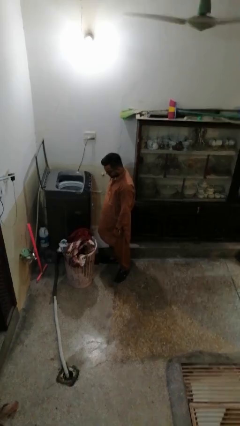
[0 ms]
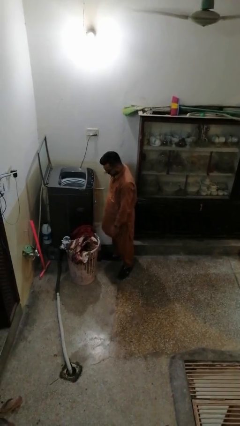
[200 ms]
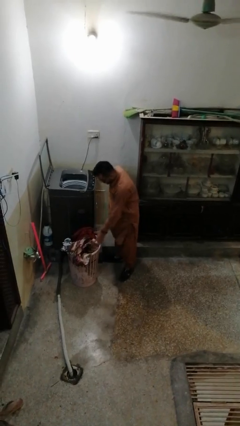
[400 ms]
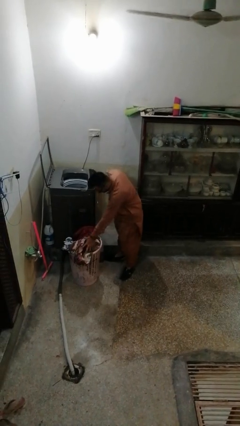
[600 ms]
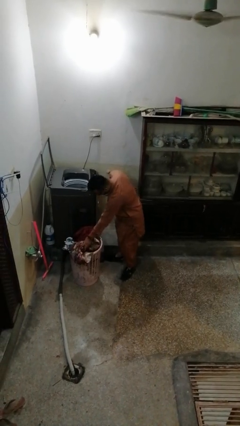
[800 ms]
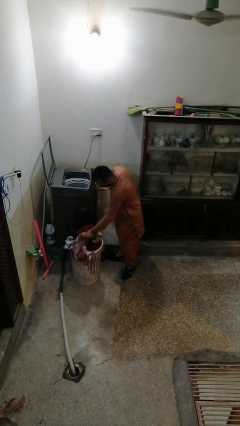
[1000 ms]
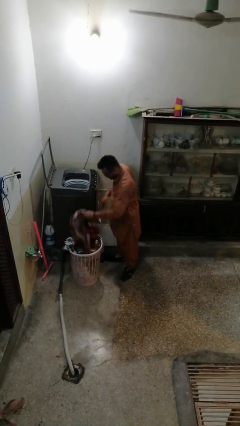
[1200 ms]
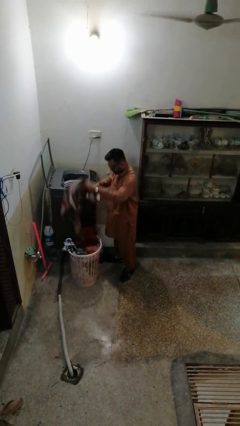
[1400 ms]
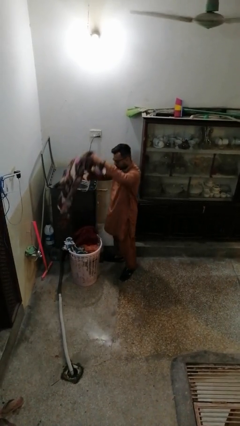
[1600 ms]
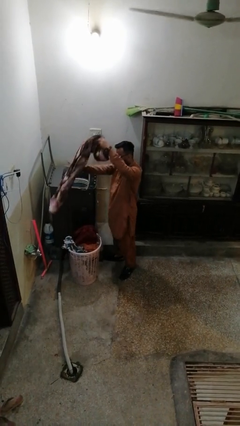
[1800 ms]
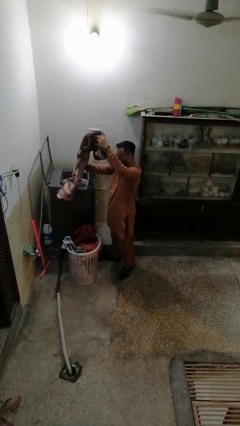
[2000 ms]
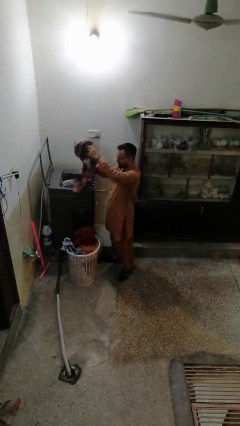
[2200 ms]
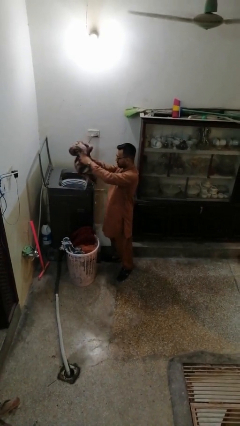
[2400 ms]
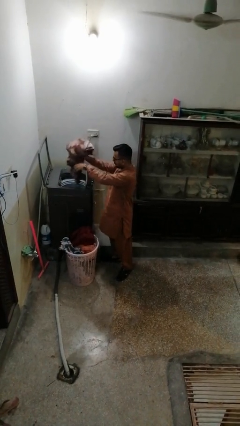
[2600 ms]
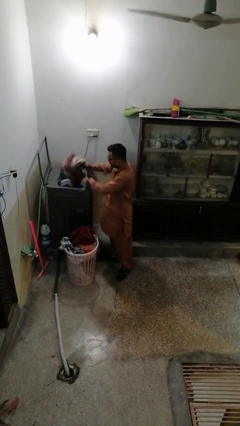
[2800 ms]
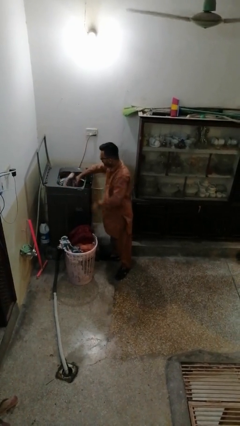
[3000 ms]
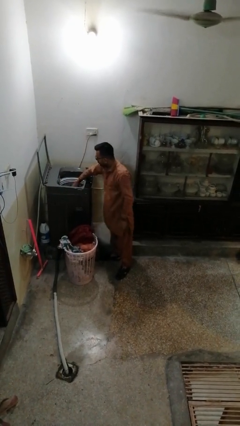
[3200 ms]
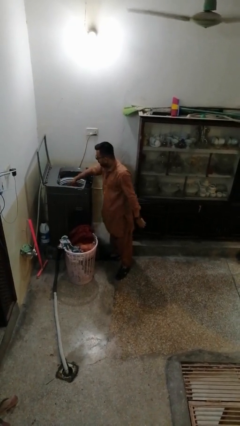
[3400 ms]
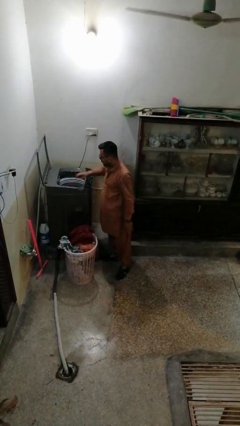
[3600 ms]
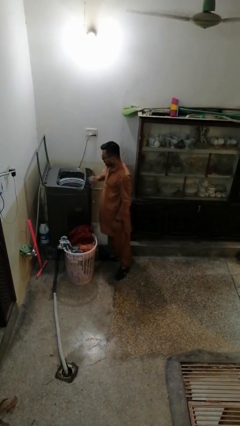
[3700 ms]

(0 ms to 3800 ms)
person loads dryer

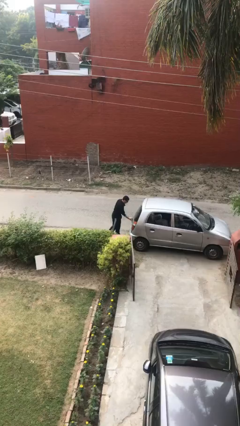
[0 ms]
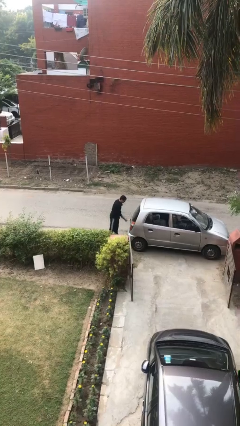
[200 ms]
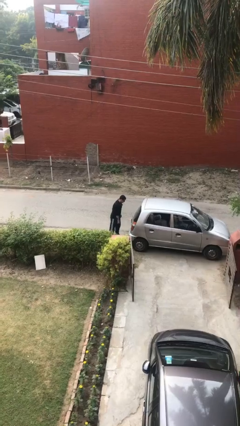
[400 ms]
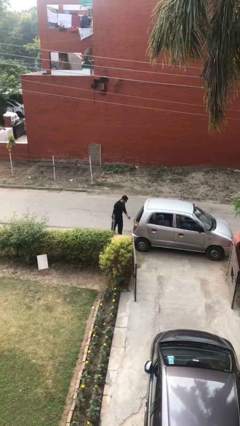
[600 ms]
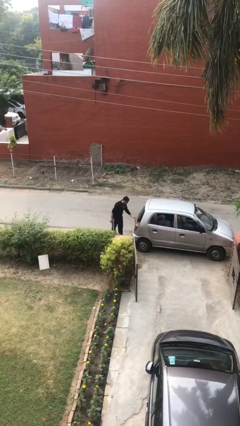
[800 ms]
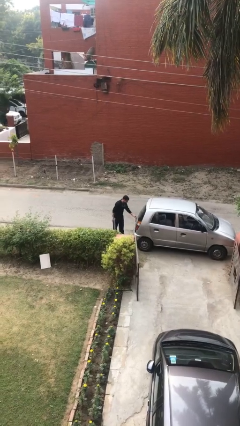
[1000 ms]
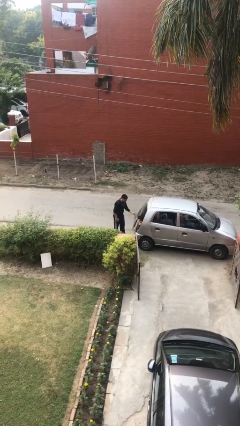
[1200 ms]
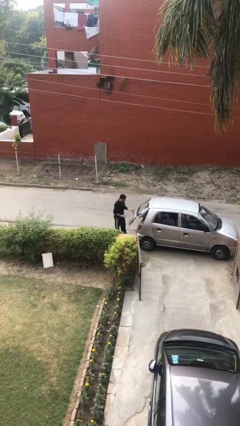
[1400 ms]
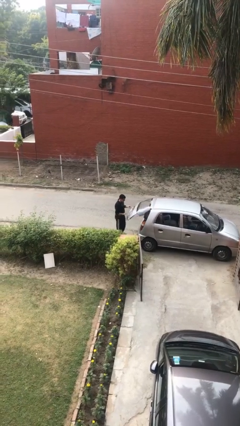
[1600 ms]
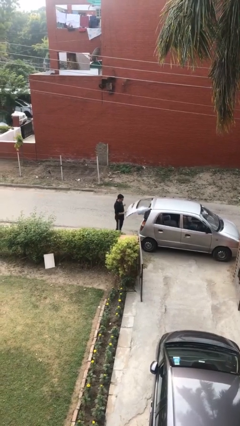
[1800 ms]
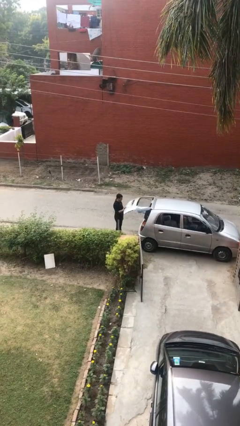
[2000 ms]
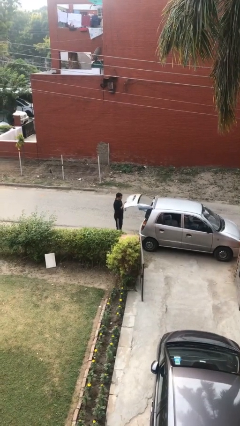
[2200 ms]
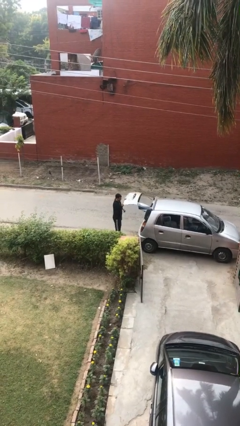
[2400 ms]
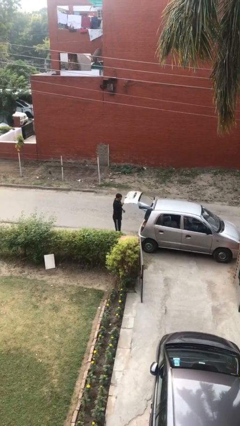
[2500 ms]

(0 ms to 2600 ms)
person opens car trunk

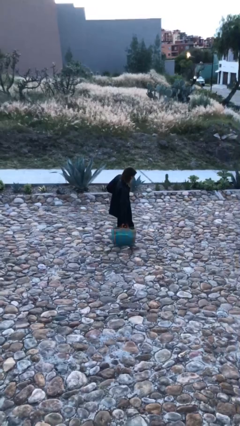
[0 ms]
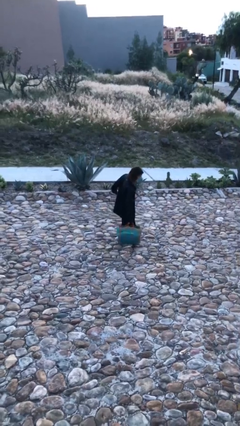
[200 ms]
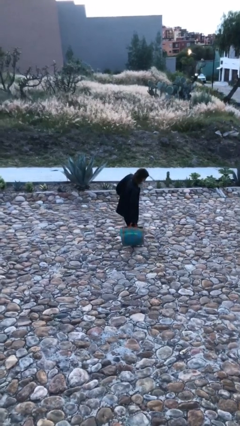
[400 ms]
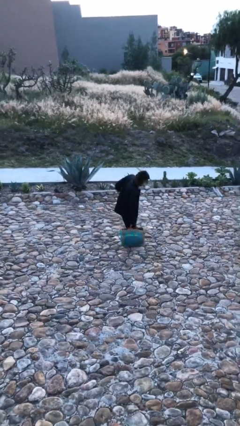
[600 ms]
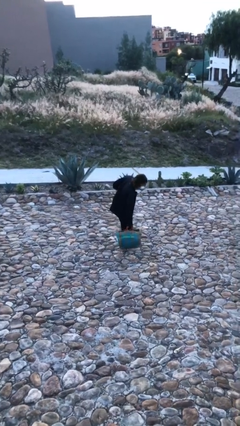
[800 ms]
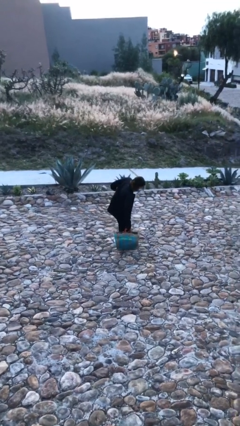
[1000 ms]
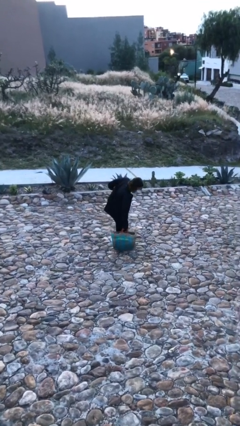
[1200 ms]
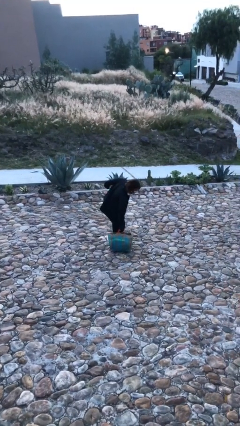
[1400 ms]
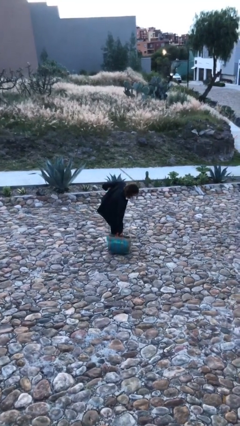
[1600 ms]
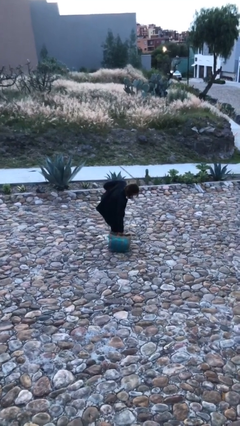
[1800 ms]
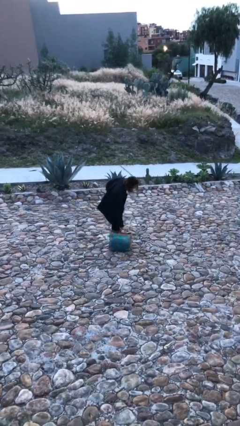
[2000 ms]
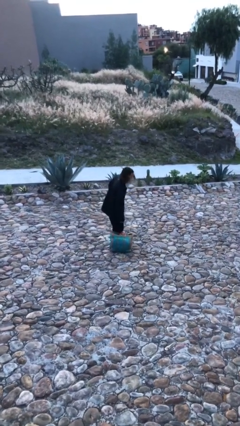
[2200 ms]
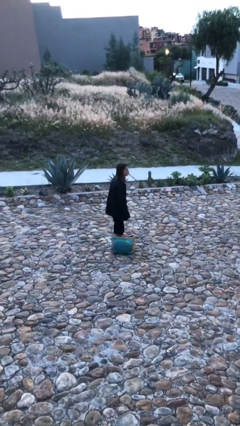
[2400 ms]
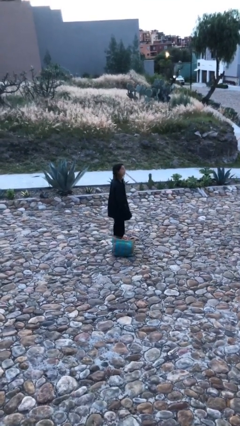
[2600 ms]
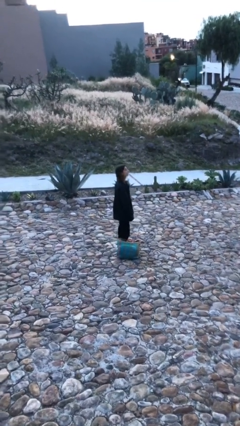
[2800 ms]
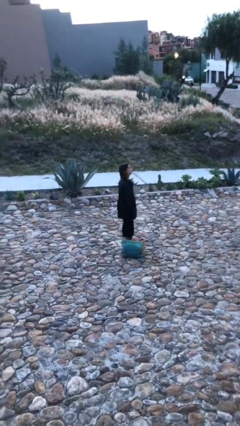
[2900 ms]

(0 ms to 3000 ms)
person puts down object on floor

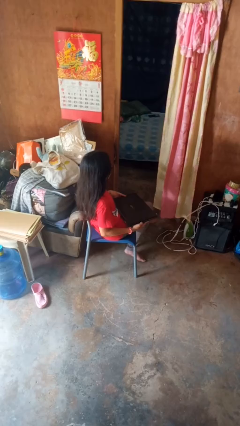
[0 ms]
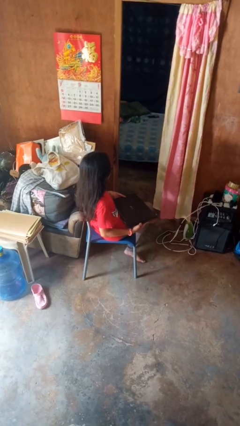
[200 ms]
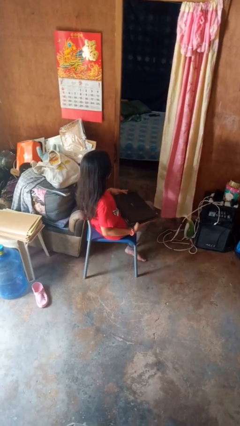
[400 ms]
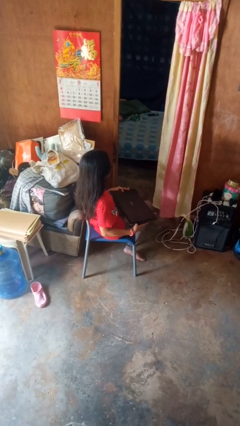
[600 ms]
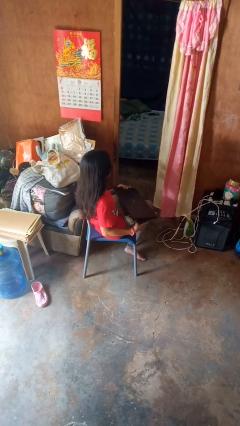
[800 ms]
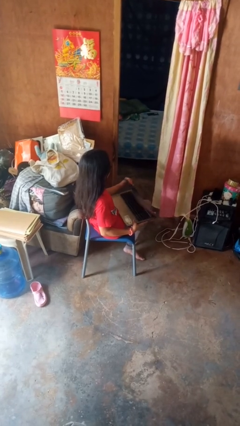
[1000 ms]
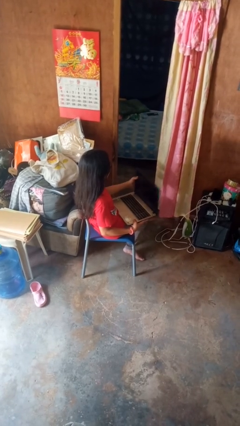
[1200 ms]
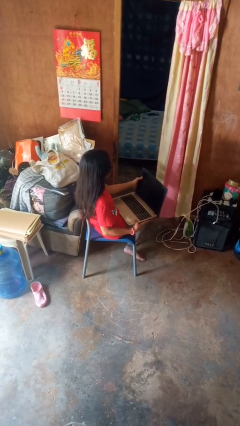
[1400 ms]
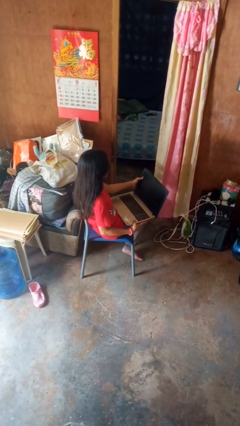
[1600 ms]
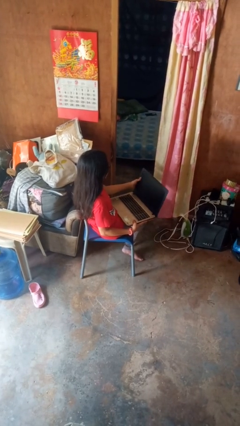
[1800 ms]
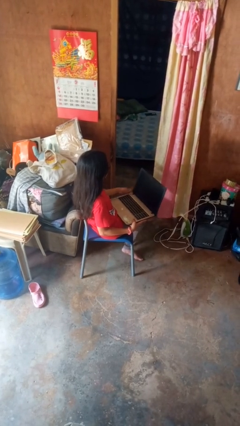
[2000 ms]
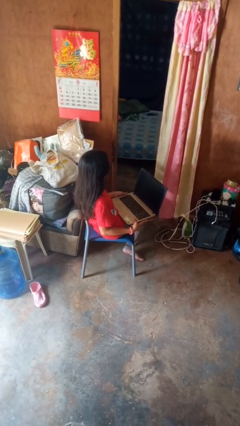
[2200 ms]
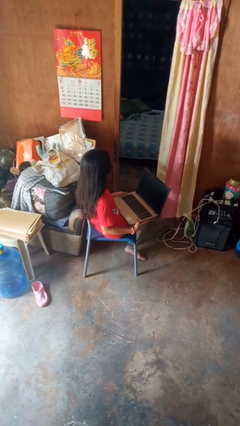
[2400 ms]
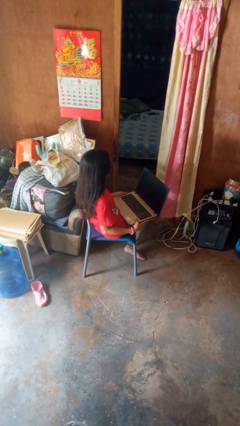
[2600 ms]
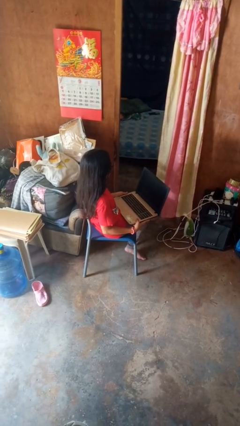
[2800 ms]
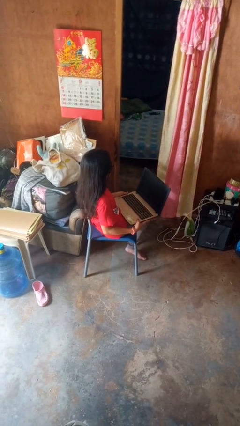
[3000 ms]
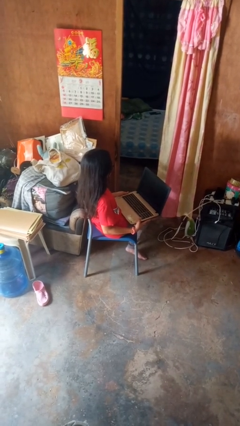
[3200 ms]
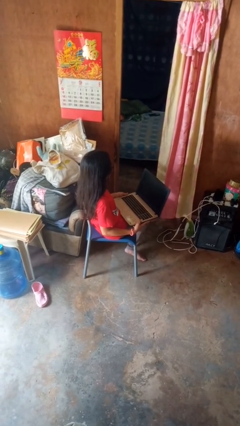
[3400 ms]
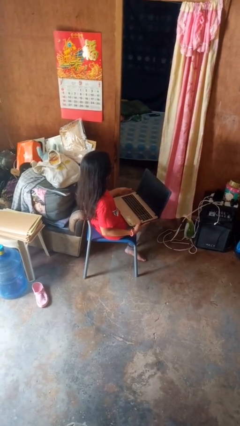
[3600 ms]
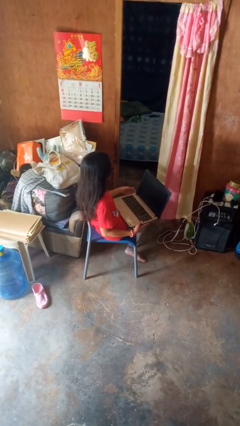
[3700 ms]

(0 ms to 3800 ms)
person opens laptop

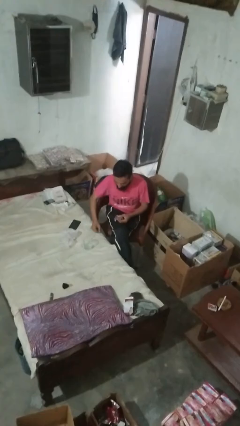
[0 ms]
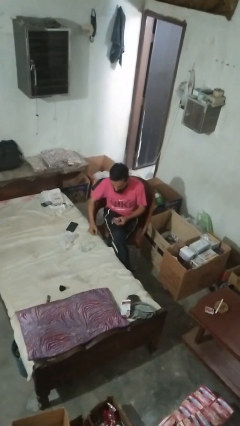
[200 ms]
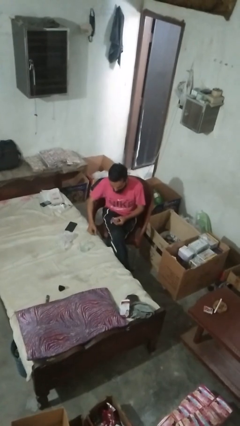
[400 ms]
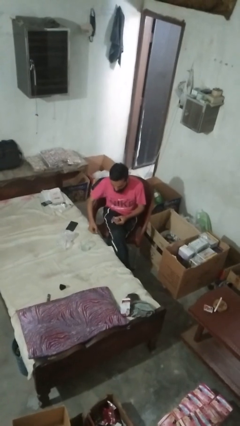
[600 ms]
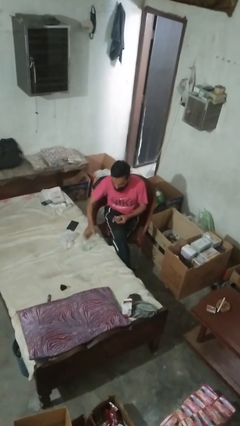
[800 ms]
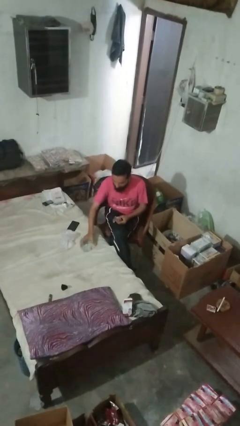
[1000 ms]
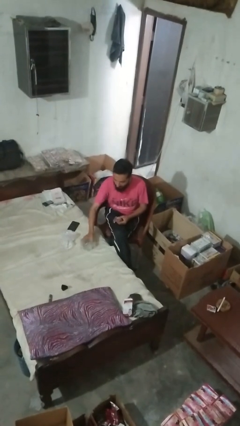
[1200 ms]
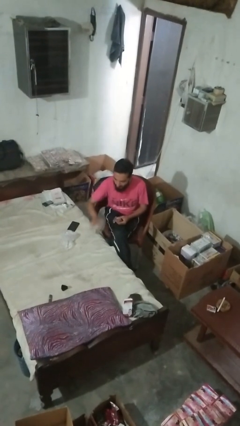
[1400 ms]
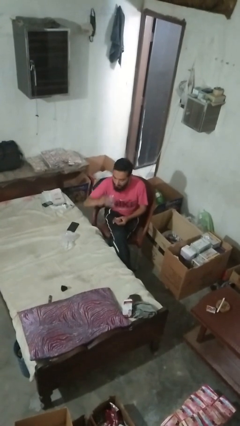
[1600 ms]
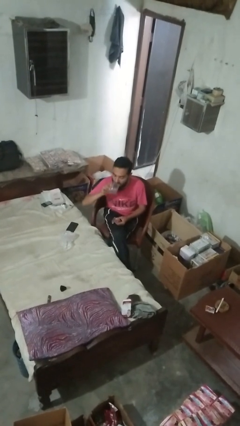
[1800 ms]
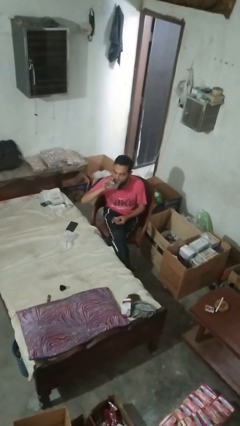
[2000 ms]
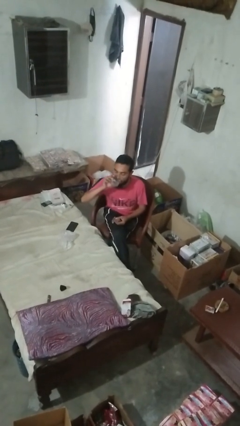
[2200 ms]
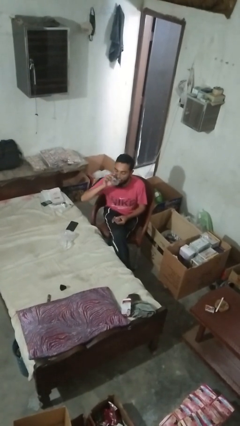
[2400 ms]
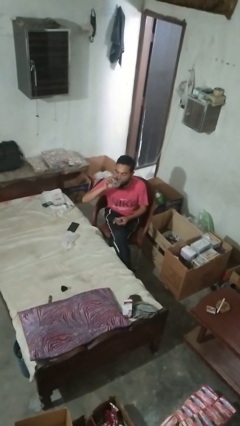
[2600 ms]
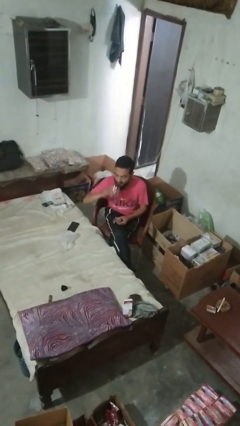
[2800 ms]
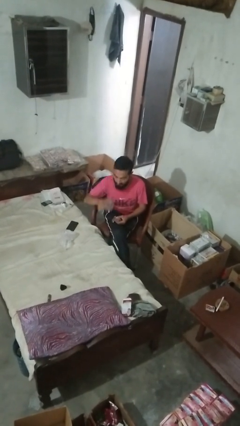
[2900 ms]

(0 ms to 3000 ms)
person drinks from cup

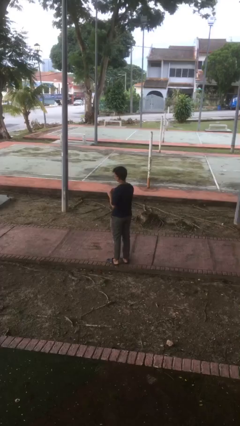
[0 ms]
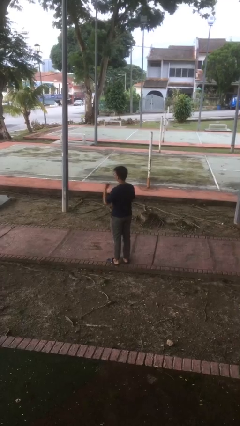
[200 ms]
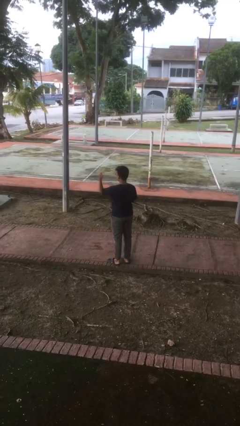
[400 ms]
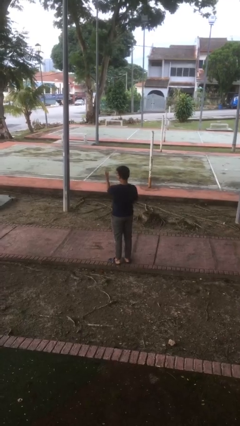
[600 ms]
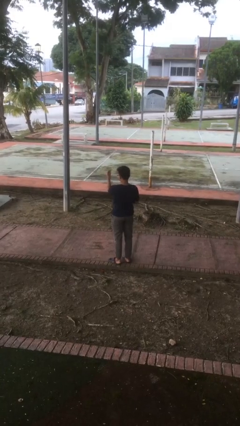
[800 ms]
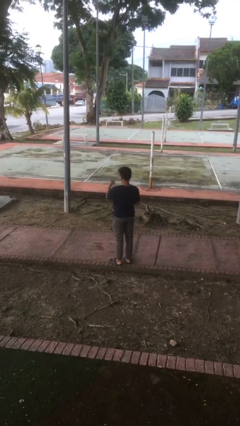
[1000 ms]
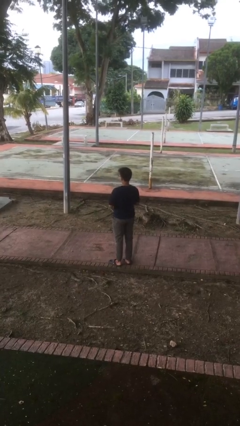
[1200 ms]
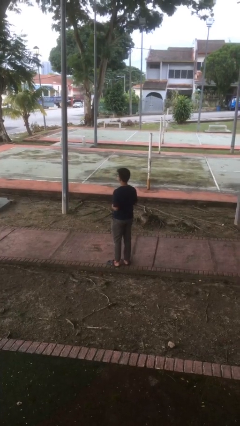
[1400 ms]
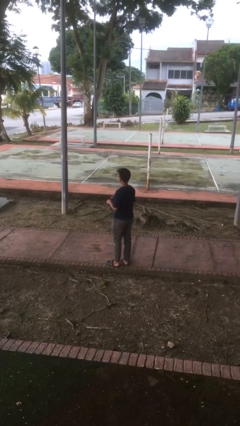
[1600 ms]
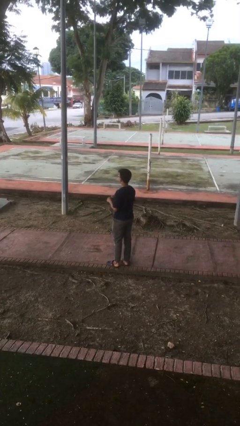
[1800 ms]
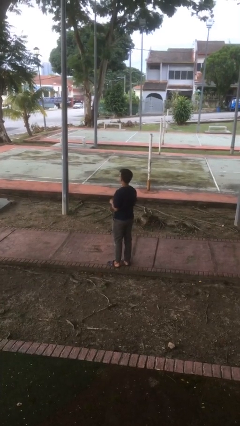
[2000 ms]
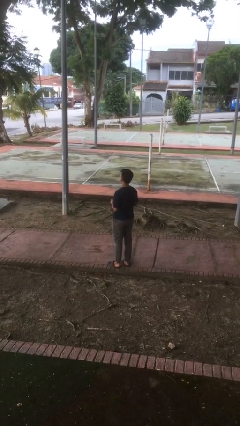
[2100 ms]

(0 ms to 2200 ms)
person karate chop
